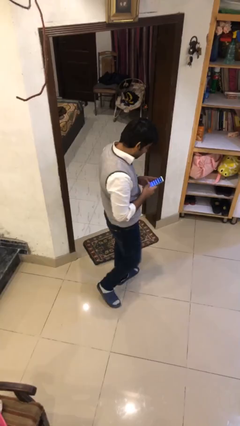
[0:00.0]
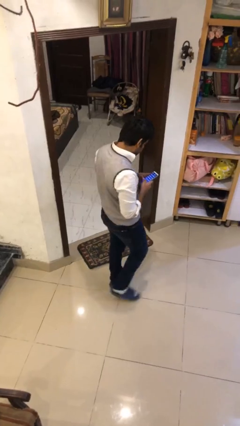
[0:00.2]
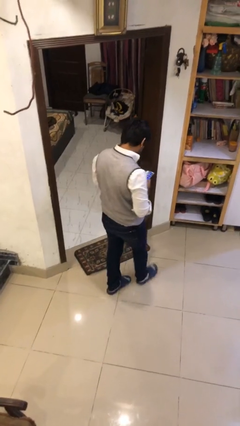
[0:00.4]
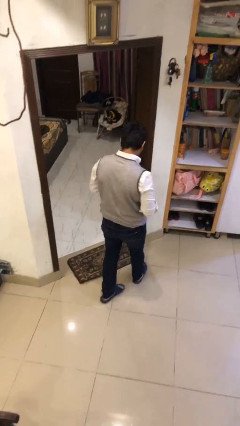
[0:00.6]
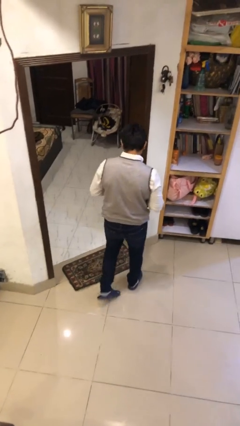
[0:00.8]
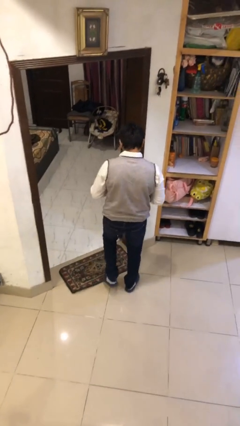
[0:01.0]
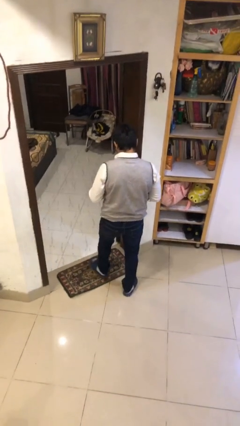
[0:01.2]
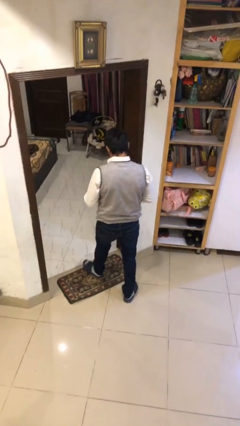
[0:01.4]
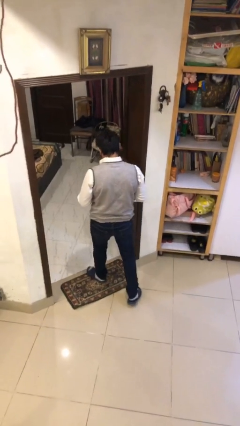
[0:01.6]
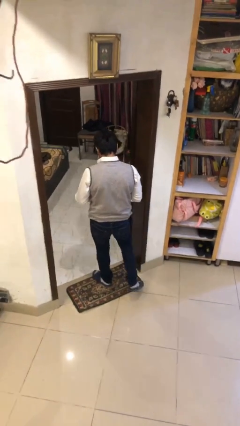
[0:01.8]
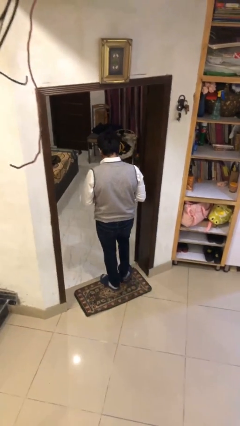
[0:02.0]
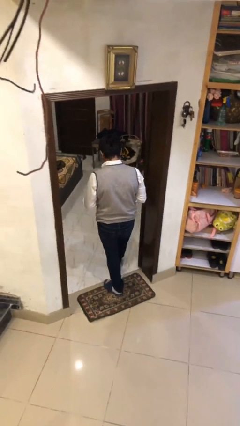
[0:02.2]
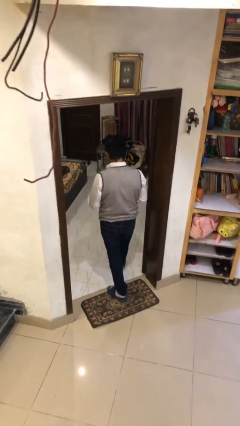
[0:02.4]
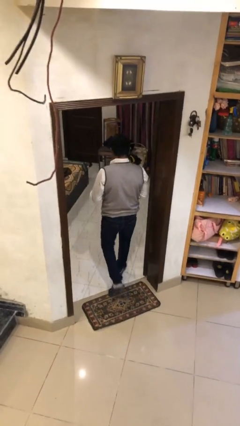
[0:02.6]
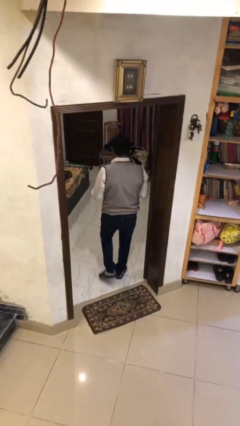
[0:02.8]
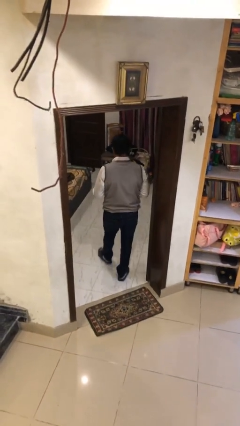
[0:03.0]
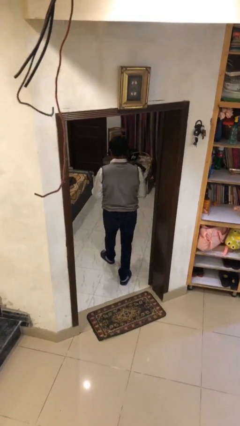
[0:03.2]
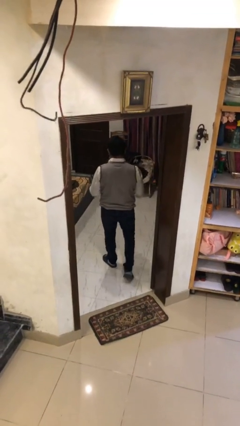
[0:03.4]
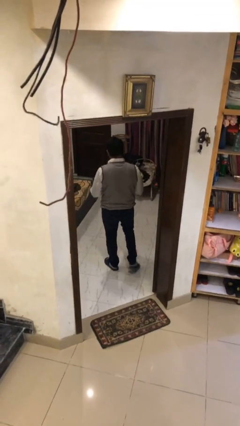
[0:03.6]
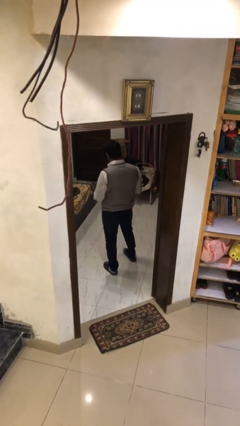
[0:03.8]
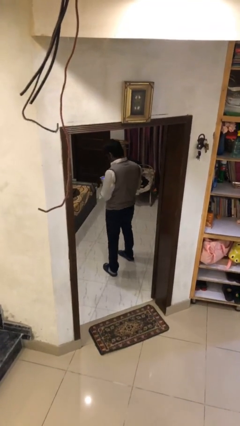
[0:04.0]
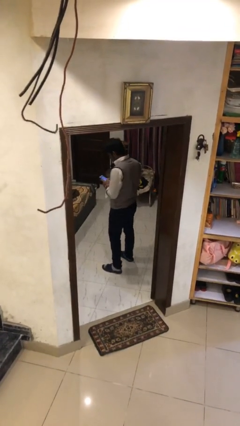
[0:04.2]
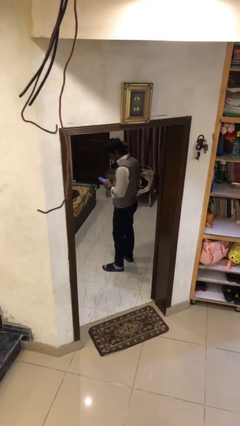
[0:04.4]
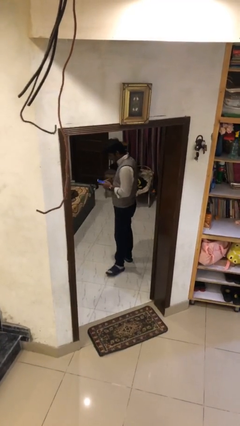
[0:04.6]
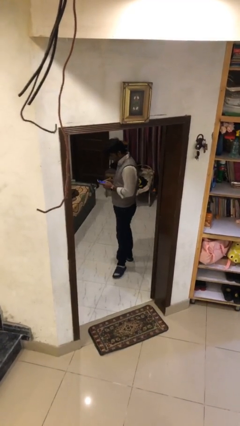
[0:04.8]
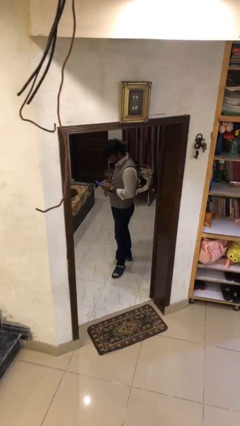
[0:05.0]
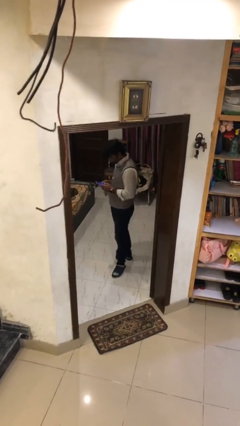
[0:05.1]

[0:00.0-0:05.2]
person exits scene through structure

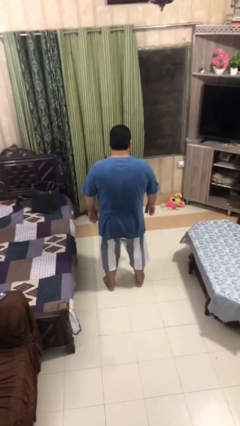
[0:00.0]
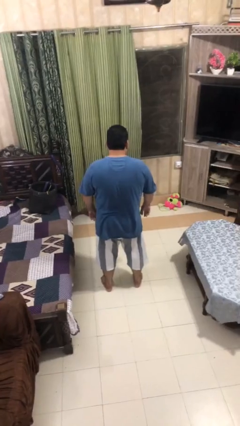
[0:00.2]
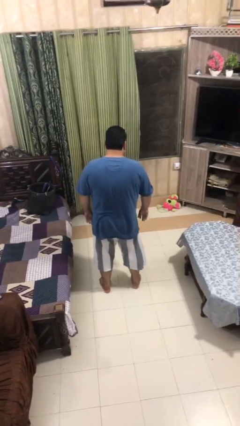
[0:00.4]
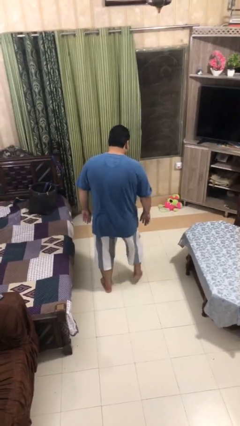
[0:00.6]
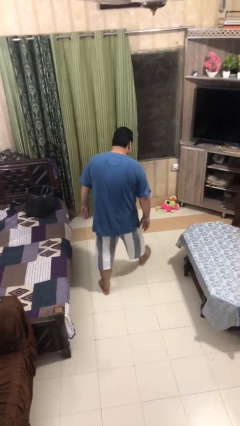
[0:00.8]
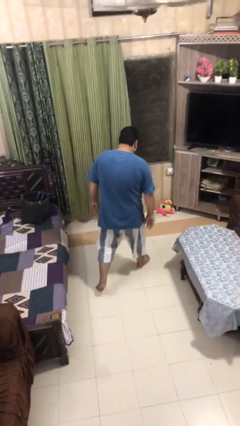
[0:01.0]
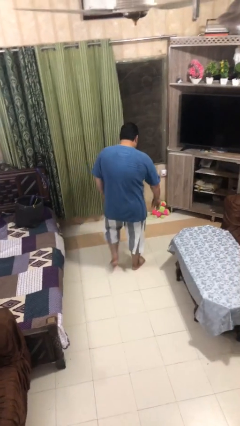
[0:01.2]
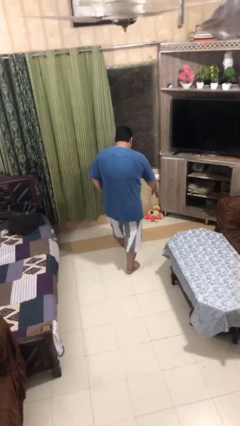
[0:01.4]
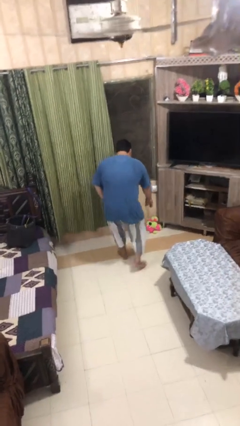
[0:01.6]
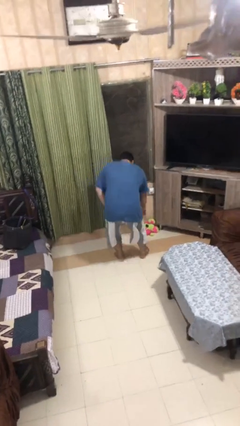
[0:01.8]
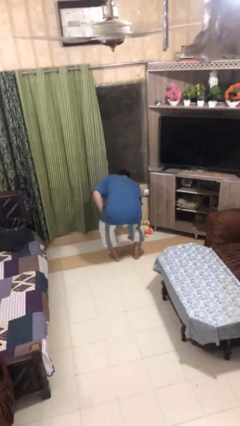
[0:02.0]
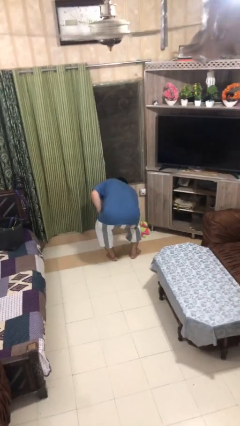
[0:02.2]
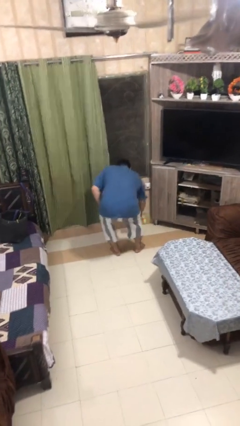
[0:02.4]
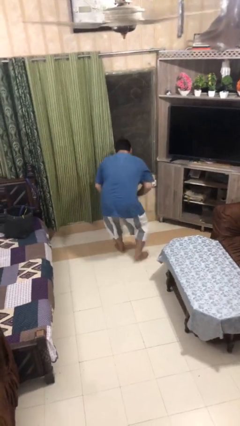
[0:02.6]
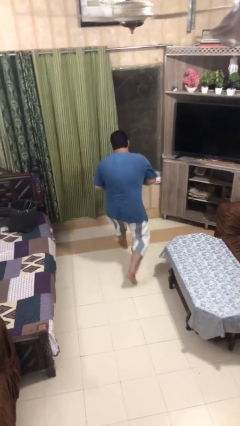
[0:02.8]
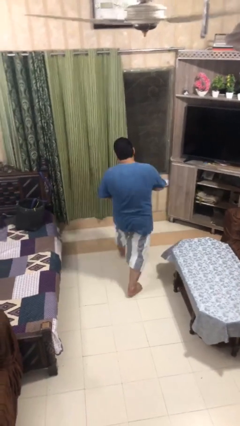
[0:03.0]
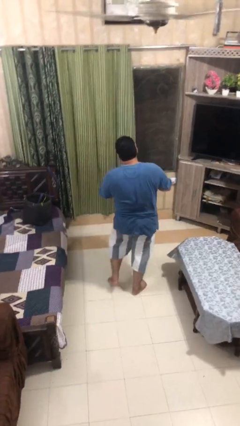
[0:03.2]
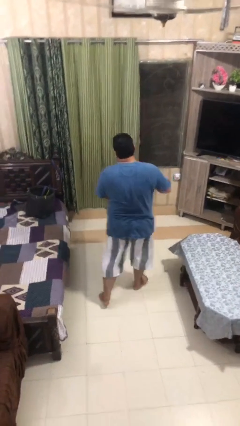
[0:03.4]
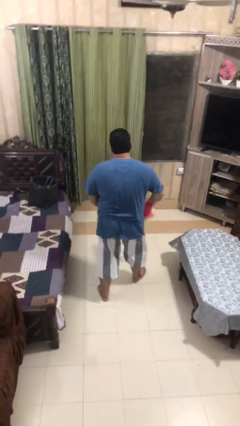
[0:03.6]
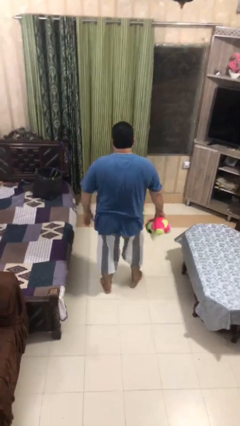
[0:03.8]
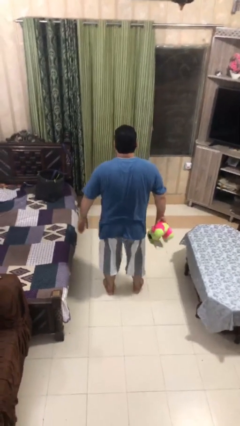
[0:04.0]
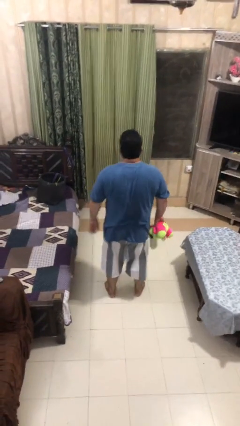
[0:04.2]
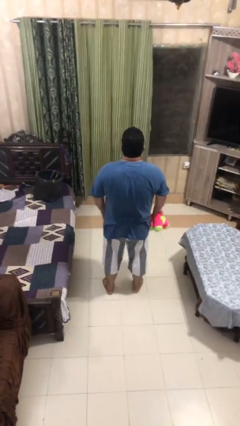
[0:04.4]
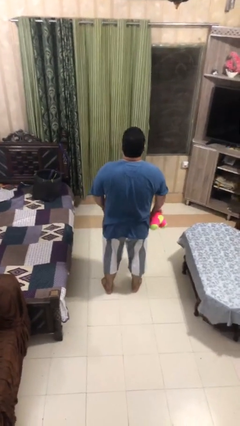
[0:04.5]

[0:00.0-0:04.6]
person picks up object from floor

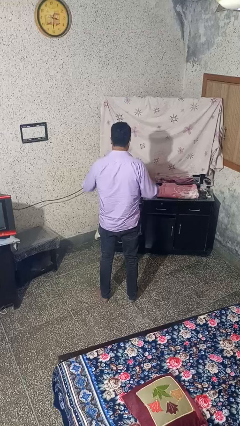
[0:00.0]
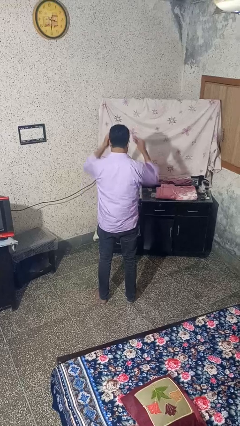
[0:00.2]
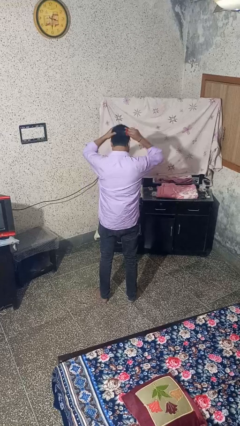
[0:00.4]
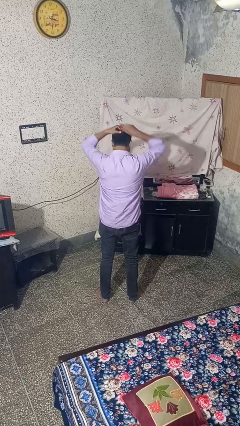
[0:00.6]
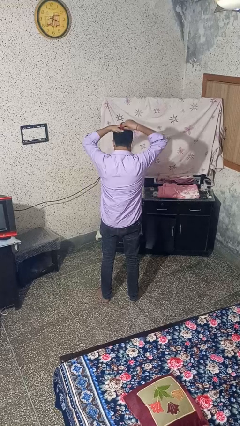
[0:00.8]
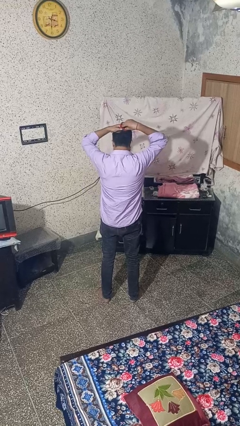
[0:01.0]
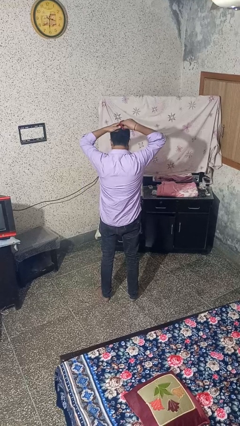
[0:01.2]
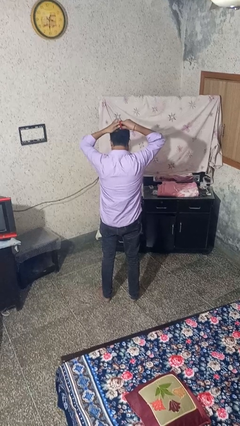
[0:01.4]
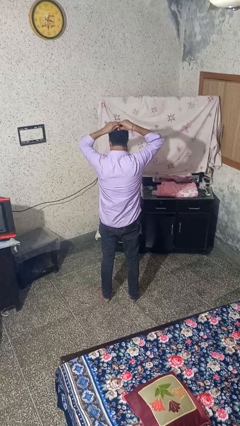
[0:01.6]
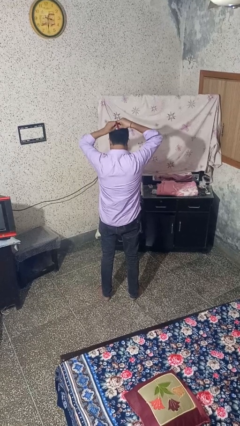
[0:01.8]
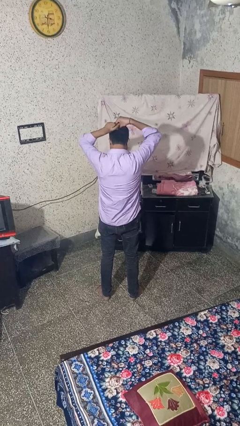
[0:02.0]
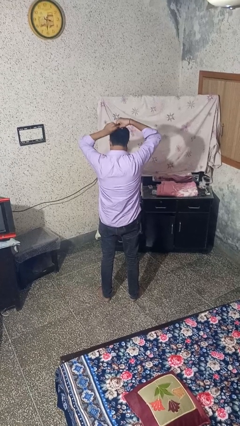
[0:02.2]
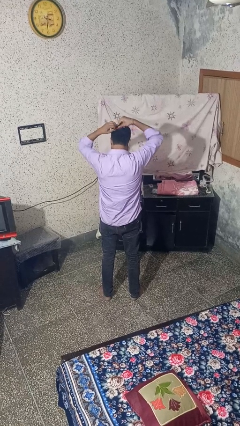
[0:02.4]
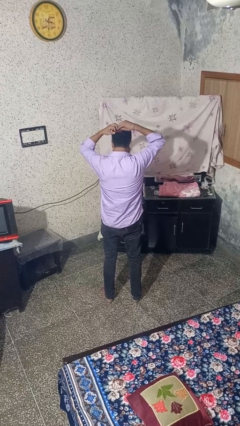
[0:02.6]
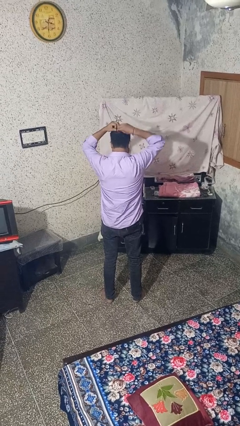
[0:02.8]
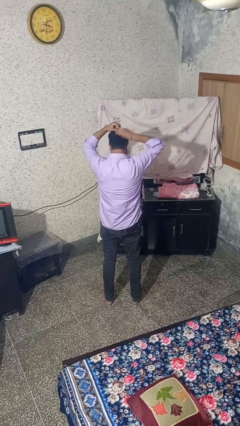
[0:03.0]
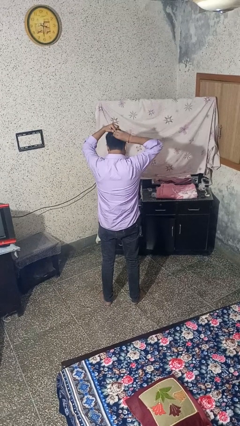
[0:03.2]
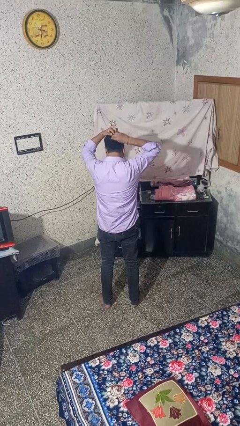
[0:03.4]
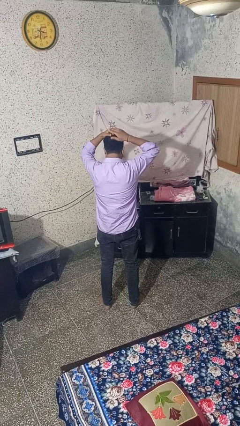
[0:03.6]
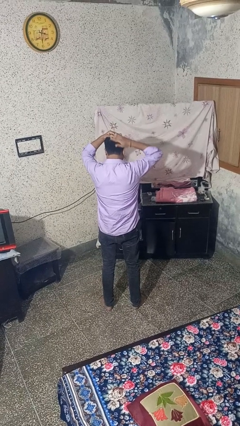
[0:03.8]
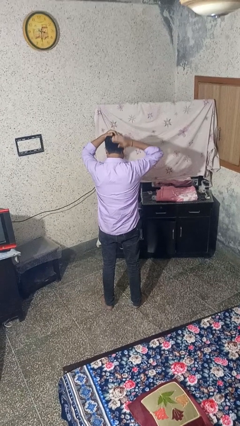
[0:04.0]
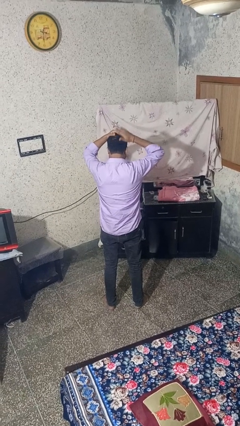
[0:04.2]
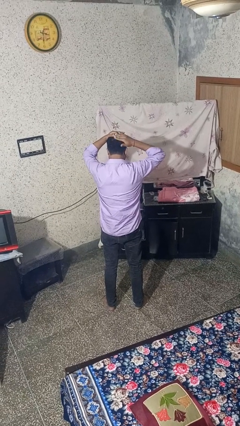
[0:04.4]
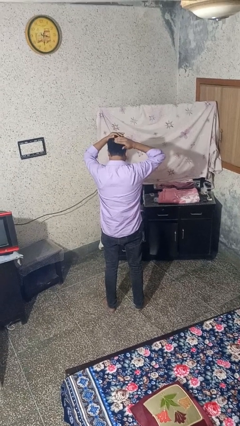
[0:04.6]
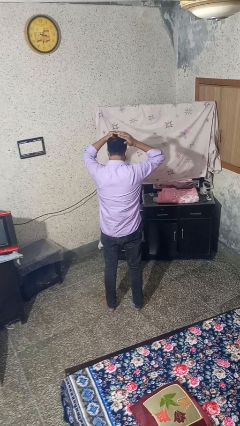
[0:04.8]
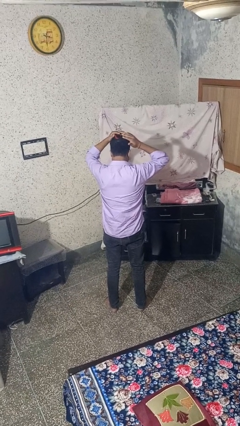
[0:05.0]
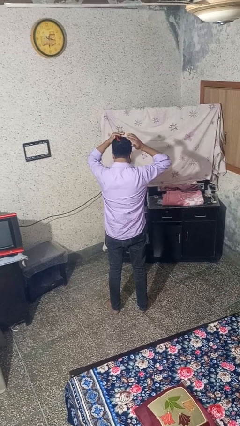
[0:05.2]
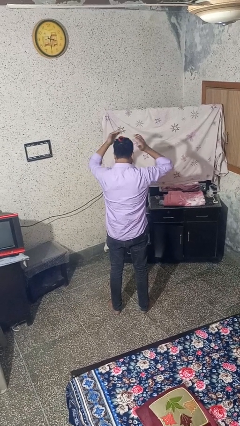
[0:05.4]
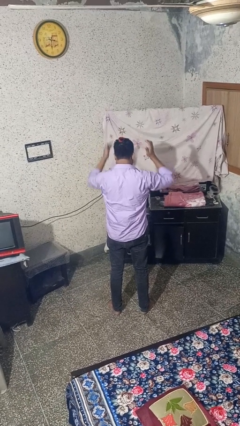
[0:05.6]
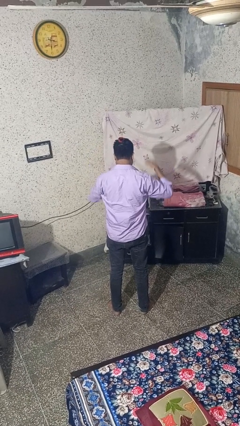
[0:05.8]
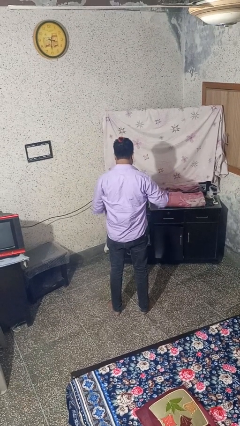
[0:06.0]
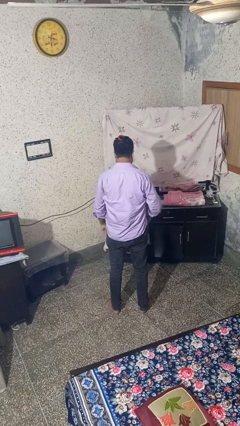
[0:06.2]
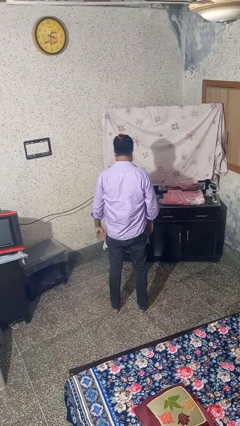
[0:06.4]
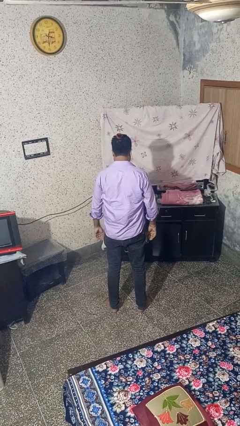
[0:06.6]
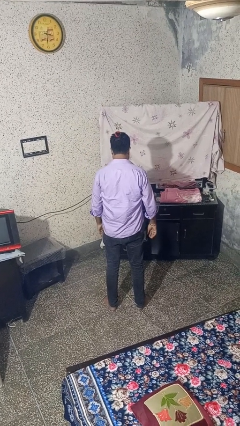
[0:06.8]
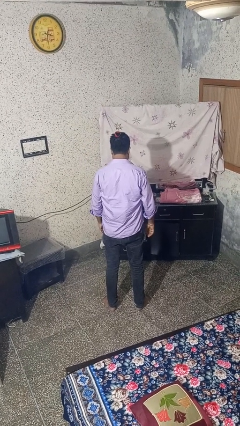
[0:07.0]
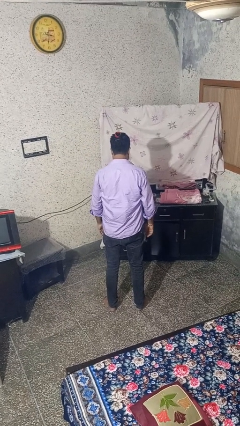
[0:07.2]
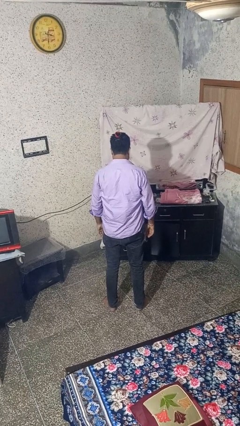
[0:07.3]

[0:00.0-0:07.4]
person puts hair in ponytail

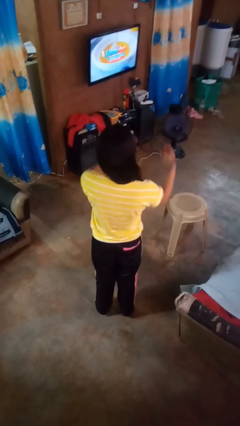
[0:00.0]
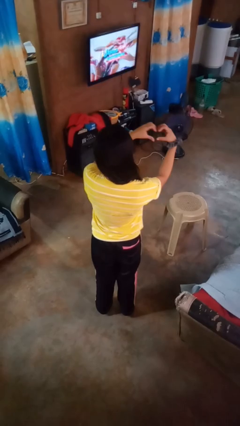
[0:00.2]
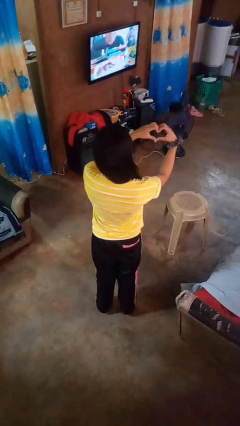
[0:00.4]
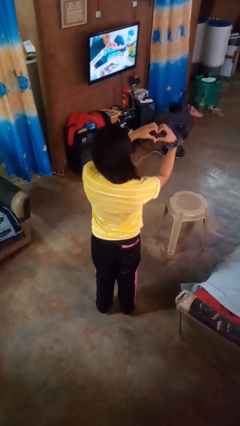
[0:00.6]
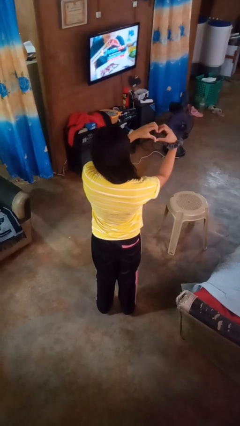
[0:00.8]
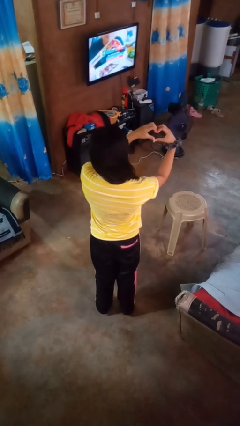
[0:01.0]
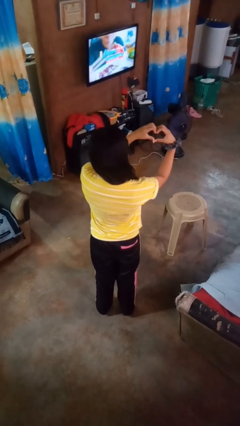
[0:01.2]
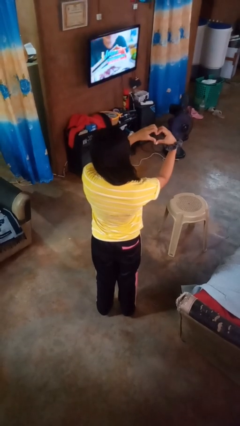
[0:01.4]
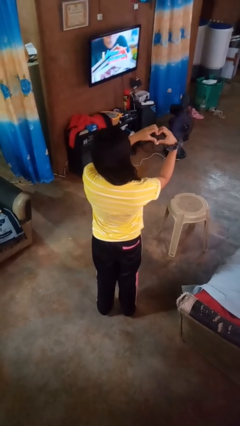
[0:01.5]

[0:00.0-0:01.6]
person gestures heart
